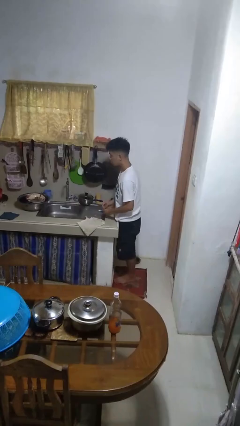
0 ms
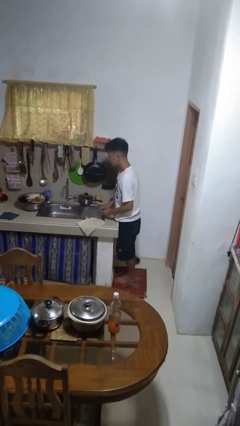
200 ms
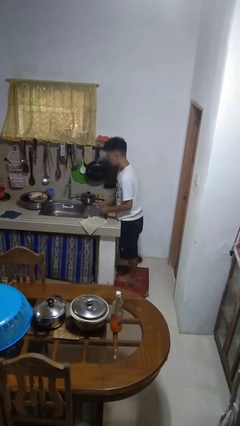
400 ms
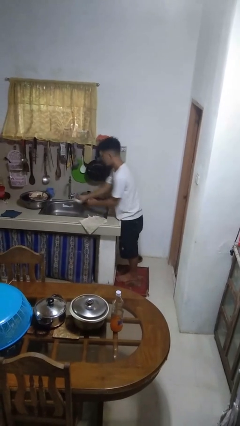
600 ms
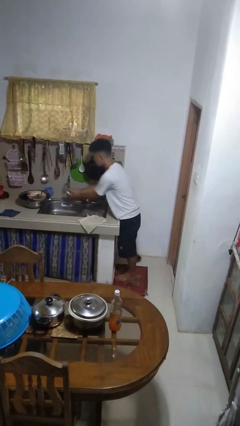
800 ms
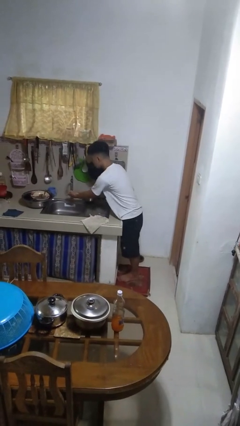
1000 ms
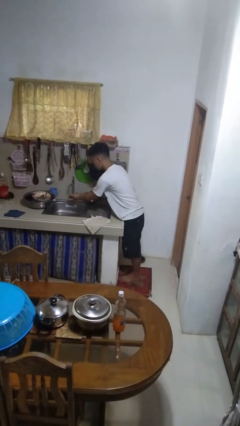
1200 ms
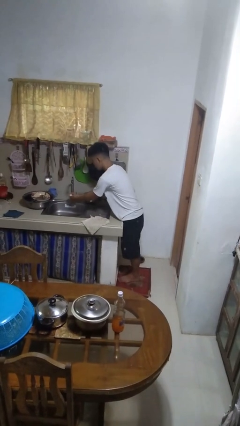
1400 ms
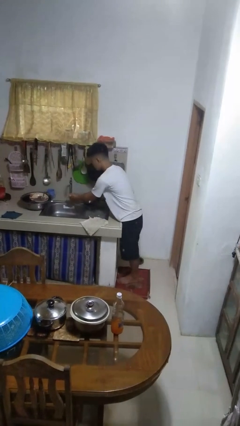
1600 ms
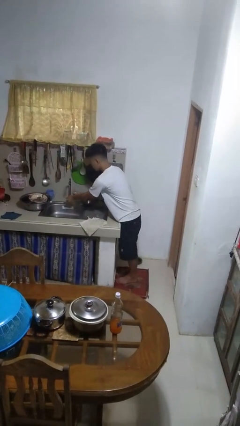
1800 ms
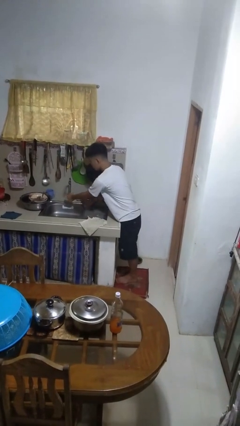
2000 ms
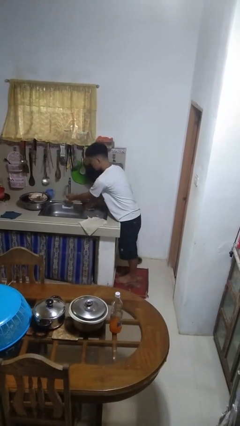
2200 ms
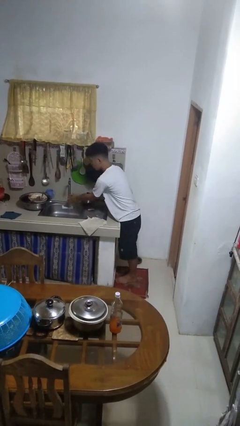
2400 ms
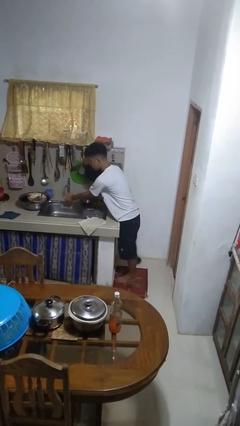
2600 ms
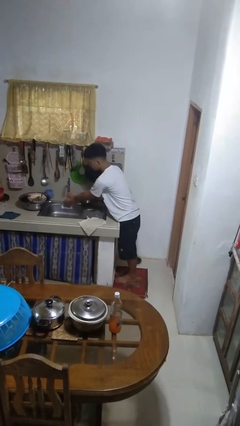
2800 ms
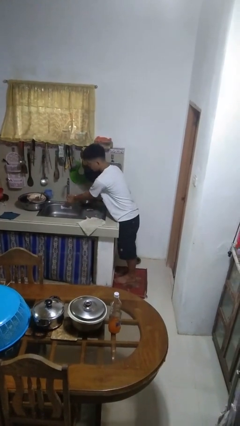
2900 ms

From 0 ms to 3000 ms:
person washes hands

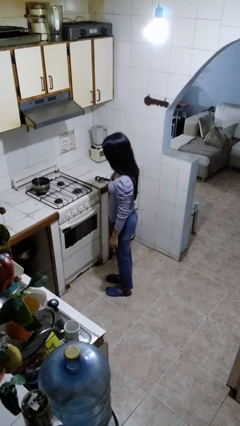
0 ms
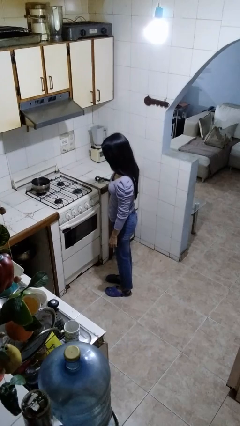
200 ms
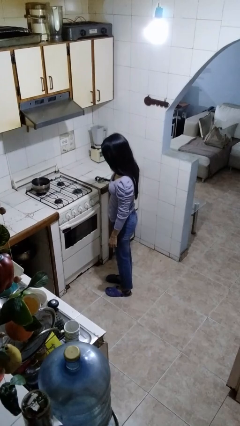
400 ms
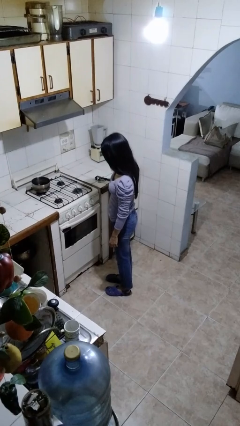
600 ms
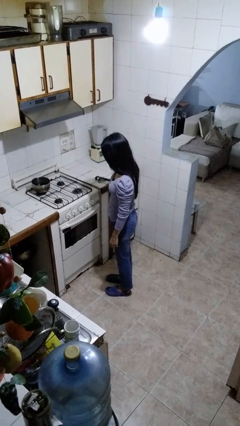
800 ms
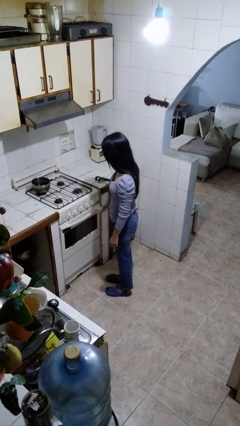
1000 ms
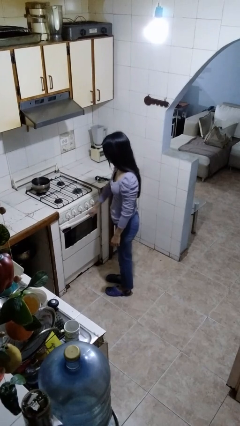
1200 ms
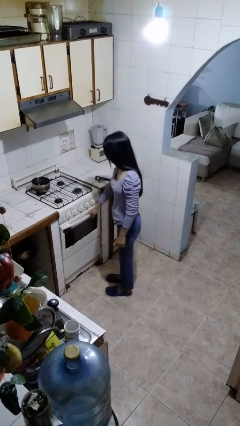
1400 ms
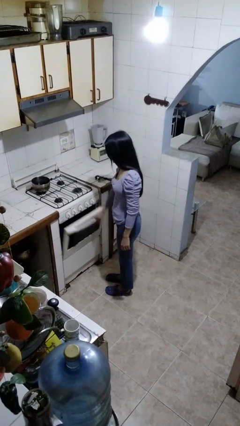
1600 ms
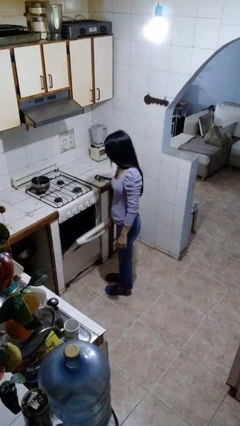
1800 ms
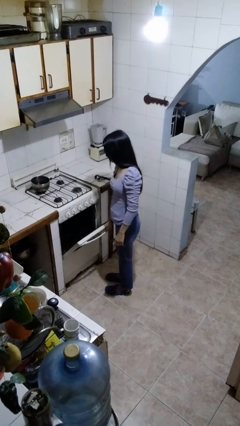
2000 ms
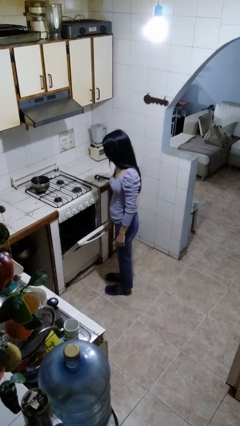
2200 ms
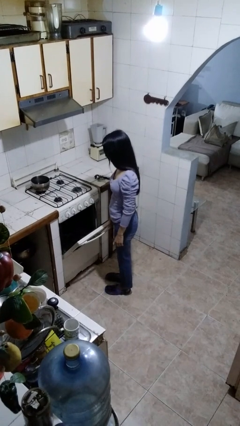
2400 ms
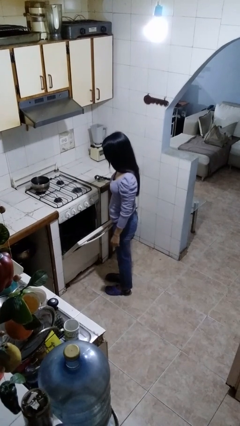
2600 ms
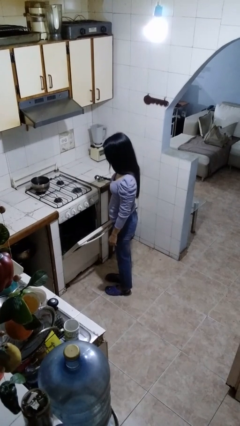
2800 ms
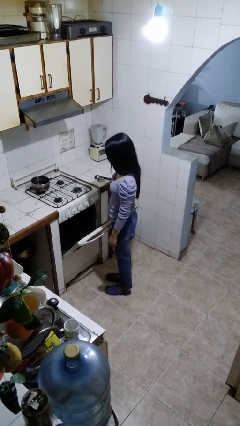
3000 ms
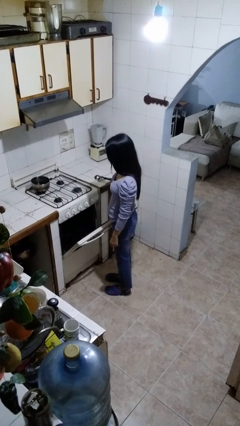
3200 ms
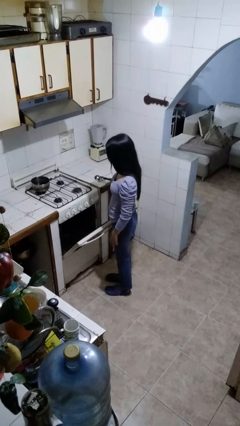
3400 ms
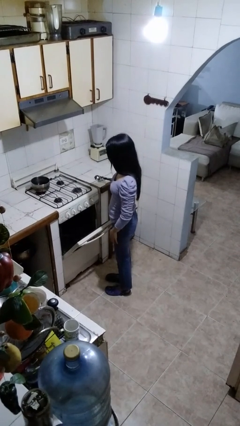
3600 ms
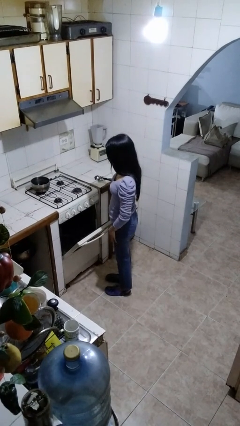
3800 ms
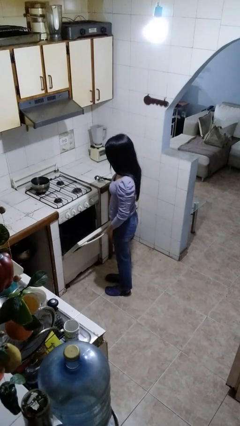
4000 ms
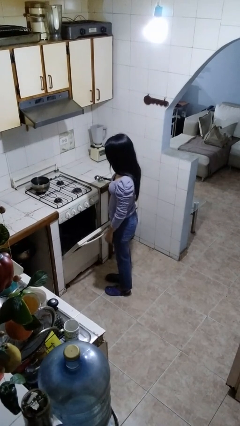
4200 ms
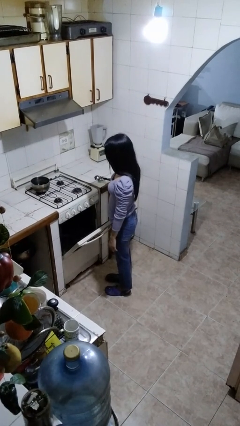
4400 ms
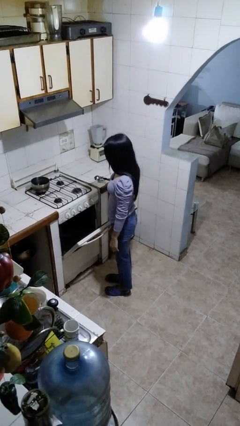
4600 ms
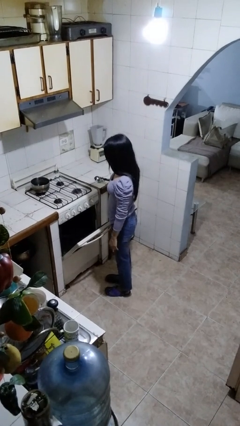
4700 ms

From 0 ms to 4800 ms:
person opens oven door

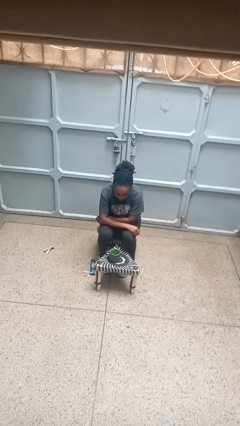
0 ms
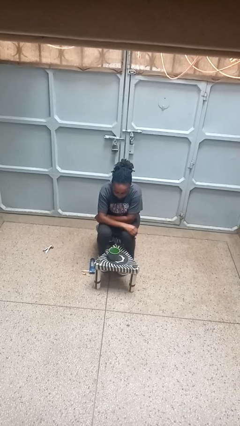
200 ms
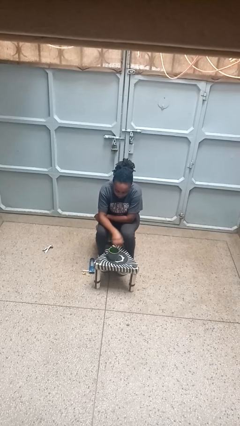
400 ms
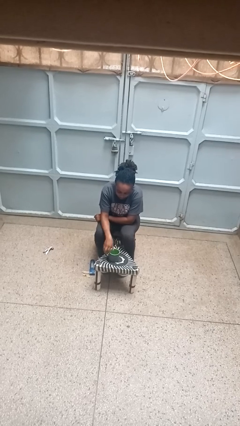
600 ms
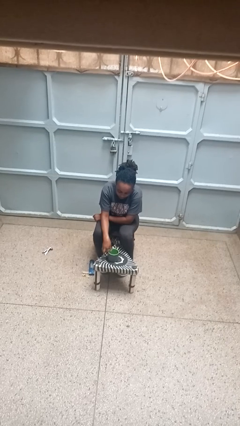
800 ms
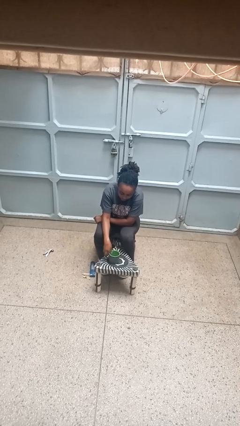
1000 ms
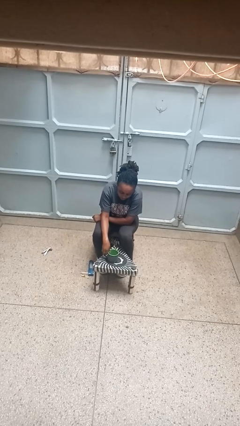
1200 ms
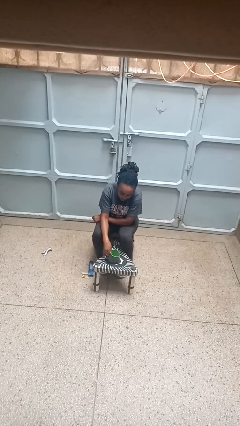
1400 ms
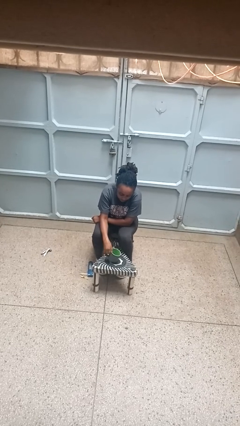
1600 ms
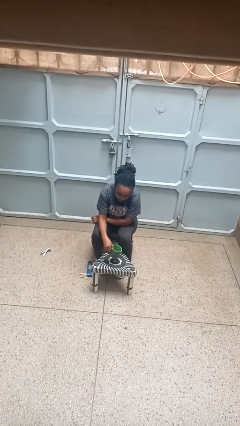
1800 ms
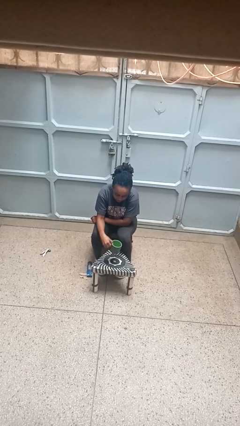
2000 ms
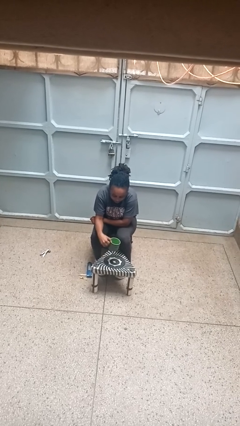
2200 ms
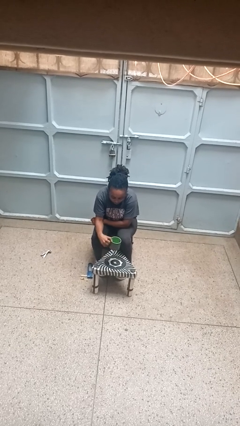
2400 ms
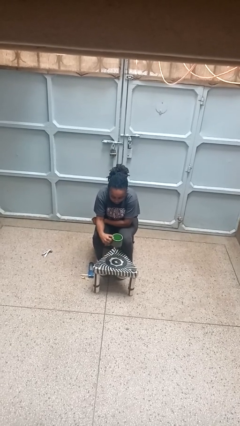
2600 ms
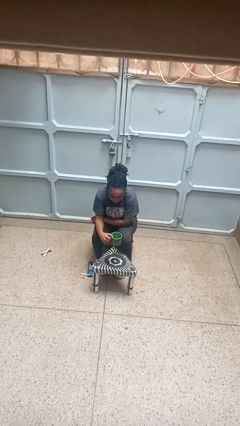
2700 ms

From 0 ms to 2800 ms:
person picks up object from table

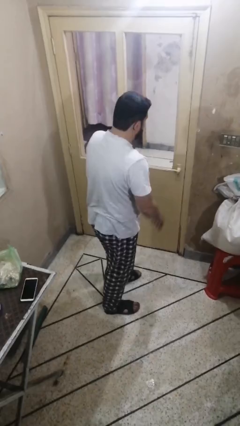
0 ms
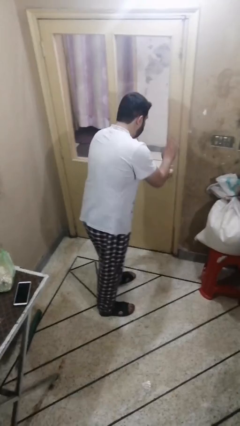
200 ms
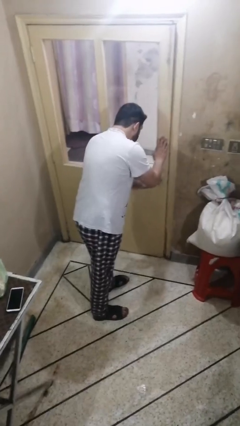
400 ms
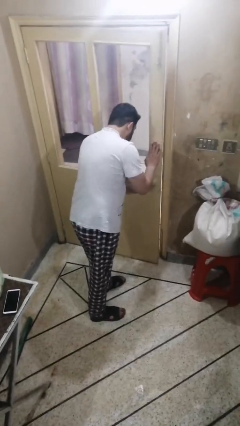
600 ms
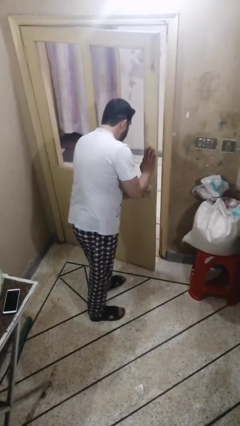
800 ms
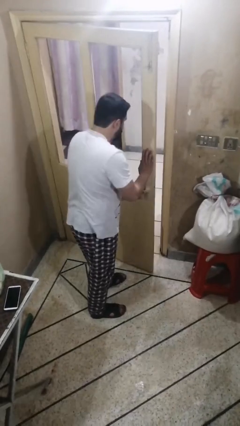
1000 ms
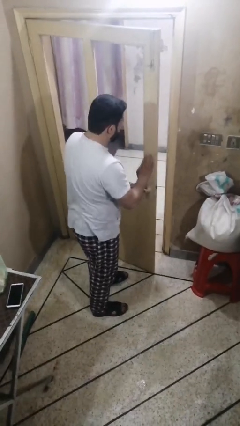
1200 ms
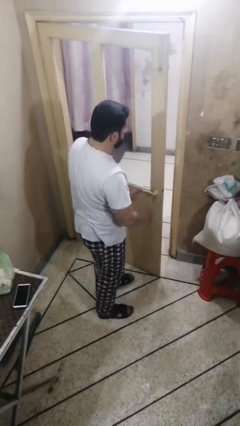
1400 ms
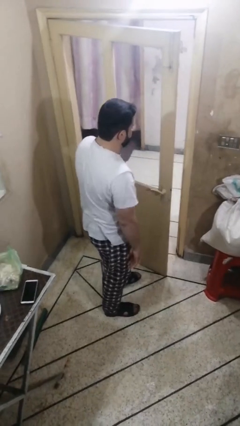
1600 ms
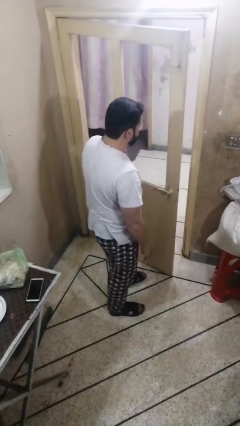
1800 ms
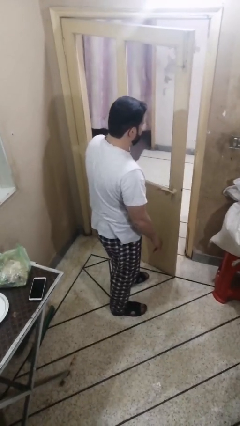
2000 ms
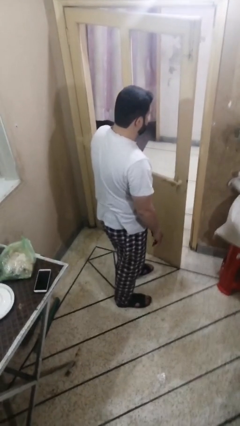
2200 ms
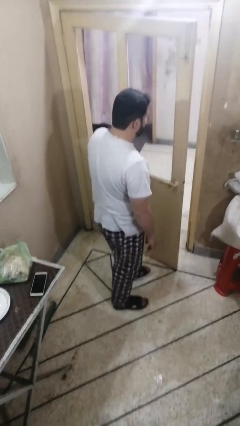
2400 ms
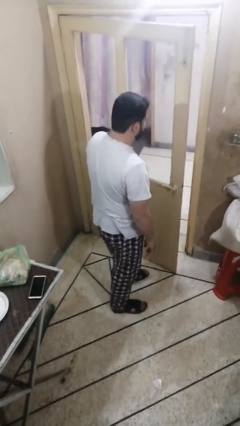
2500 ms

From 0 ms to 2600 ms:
person opens facility door

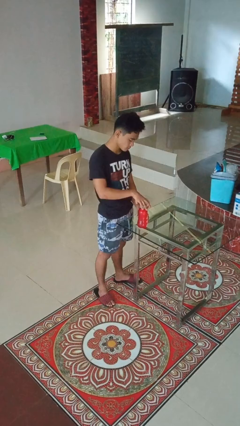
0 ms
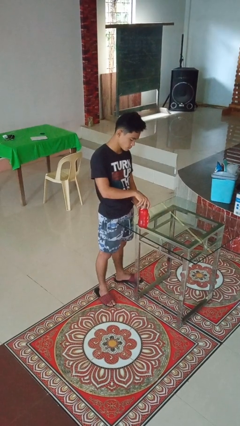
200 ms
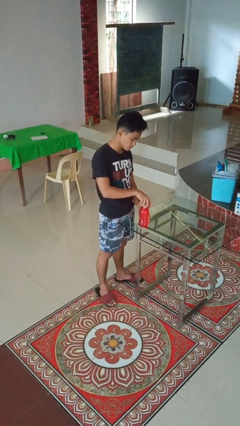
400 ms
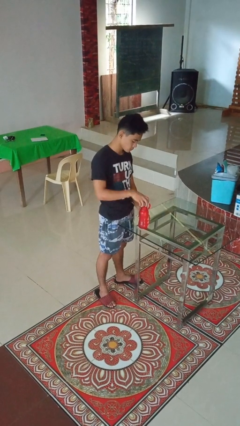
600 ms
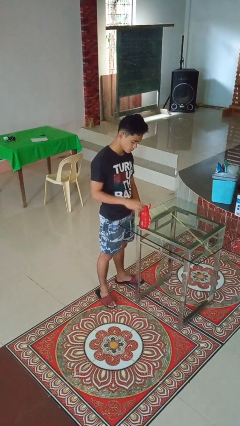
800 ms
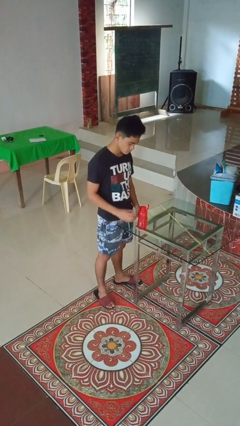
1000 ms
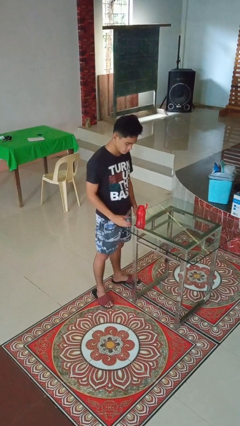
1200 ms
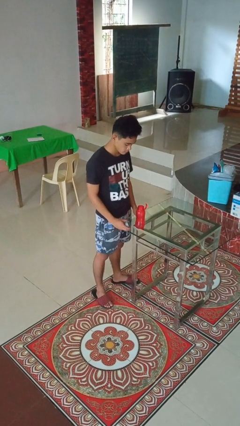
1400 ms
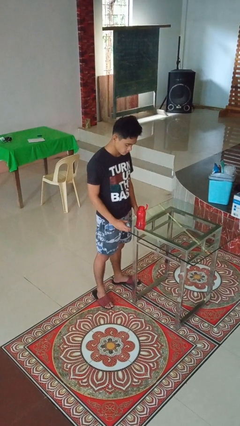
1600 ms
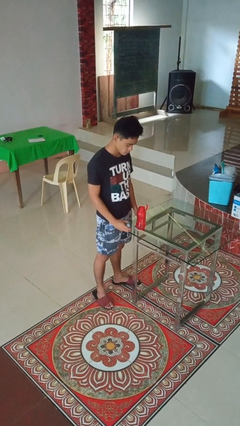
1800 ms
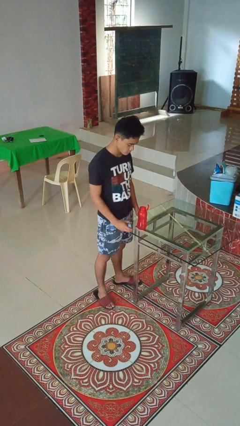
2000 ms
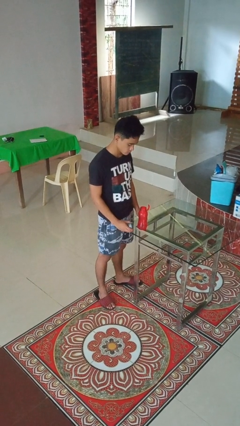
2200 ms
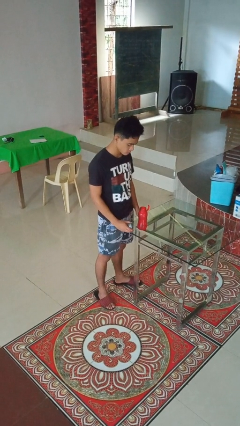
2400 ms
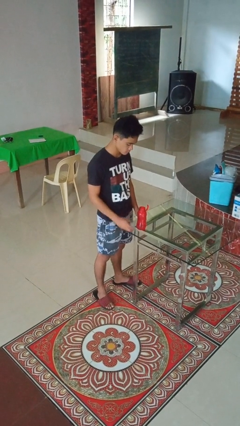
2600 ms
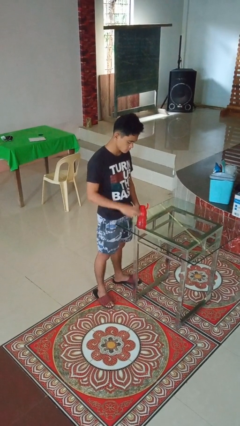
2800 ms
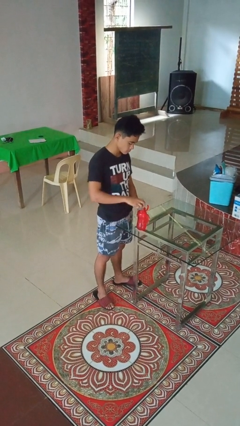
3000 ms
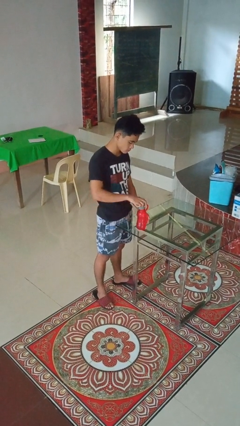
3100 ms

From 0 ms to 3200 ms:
person unscrews lid from bottle

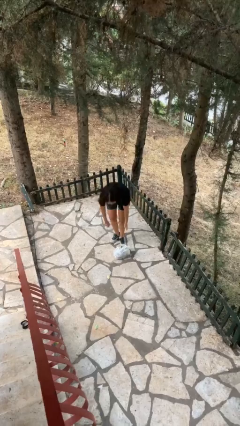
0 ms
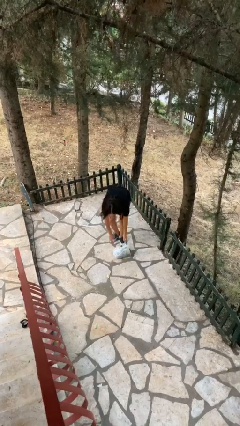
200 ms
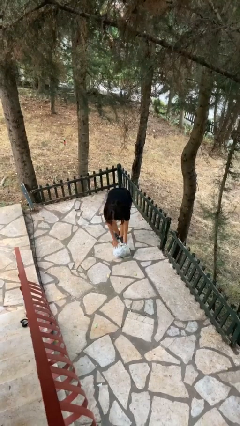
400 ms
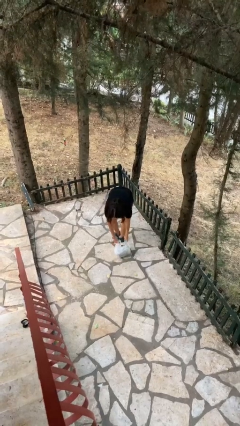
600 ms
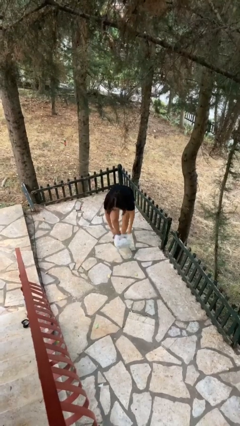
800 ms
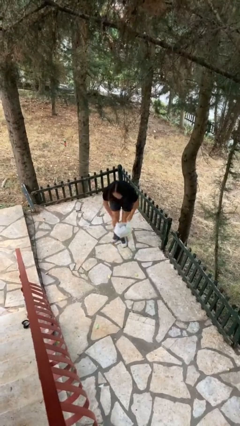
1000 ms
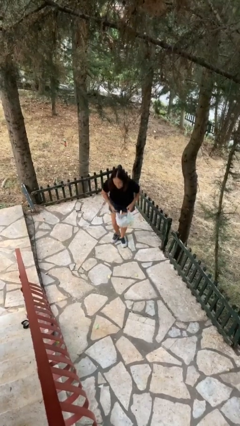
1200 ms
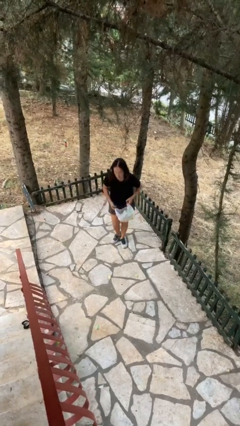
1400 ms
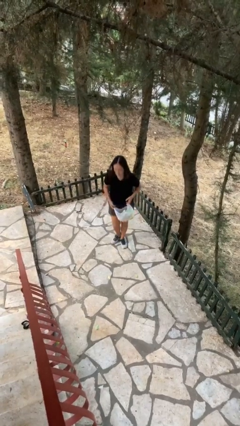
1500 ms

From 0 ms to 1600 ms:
person picks up object from floor
